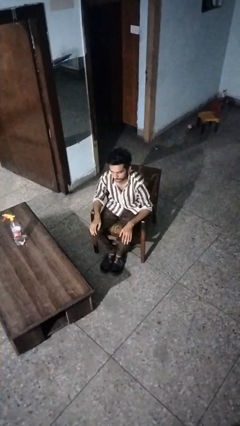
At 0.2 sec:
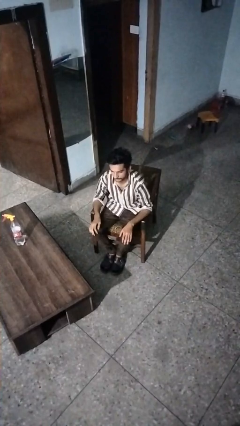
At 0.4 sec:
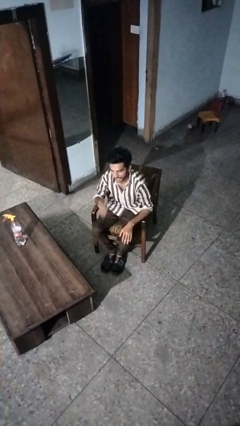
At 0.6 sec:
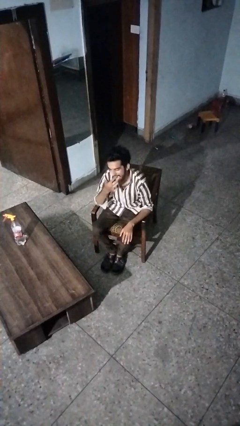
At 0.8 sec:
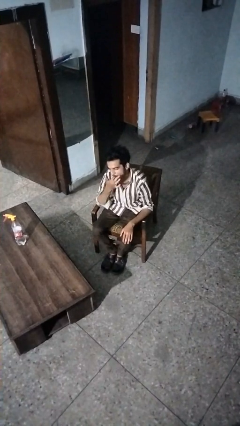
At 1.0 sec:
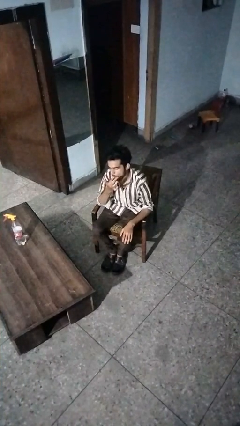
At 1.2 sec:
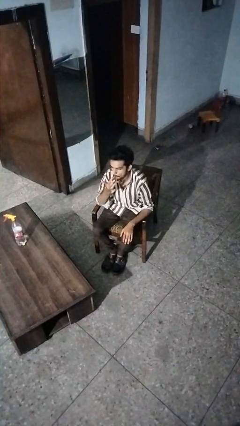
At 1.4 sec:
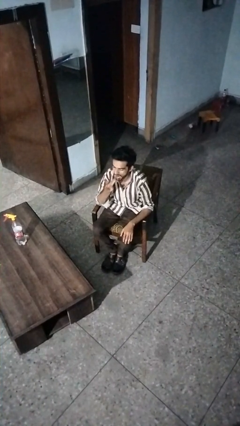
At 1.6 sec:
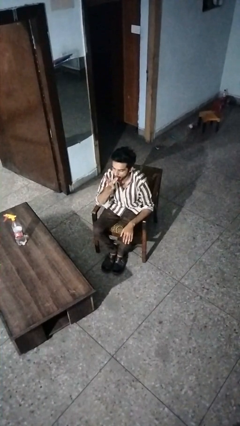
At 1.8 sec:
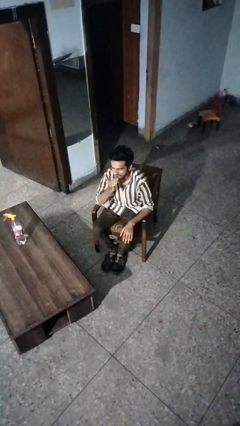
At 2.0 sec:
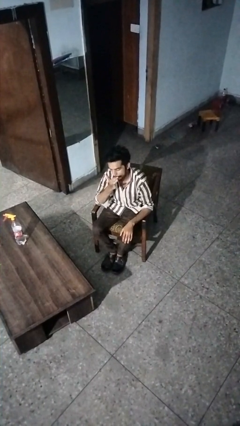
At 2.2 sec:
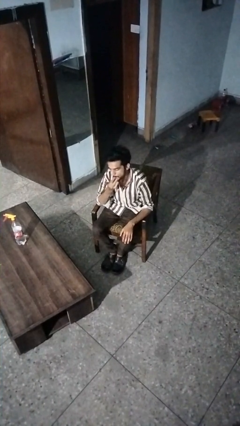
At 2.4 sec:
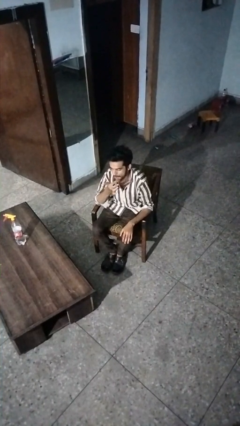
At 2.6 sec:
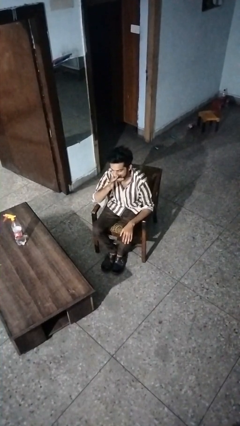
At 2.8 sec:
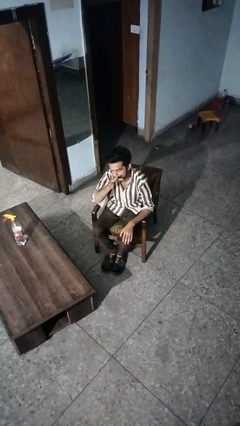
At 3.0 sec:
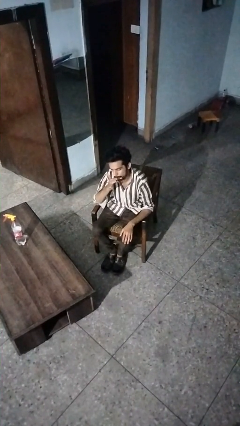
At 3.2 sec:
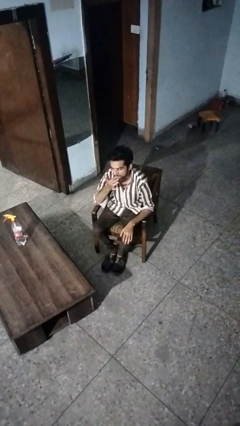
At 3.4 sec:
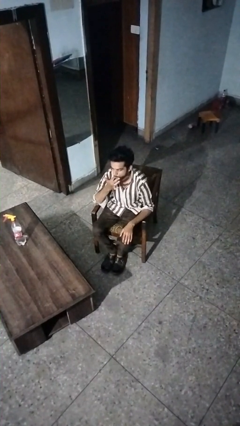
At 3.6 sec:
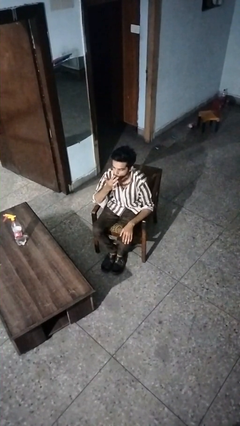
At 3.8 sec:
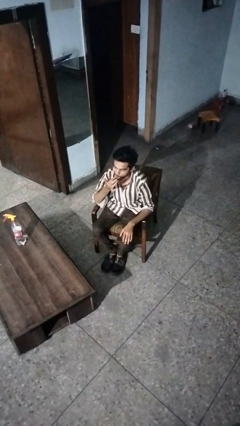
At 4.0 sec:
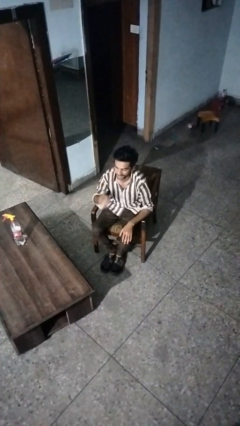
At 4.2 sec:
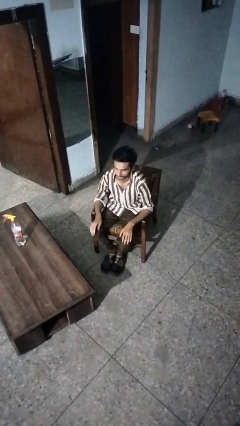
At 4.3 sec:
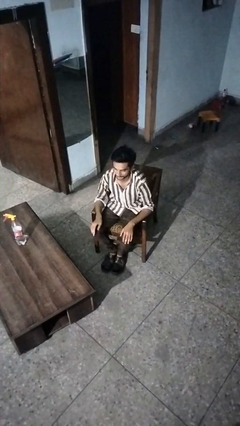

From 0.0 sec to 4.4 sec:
person licks fingers

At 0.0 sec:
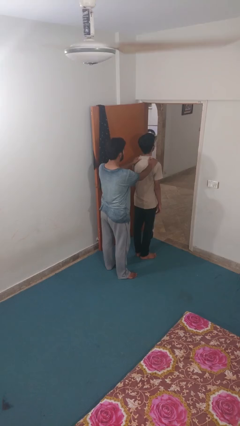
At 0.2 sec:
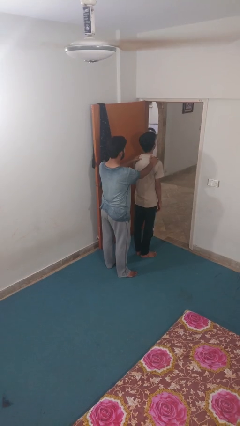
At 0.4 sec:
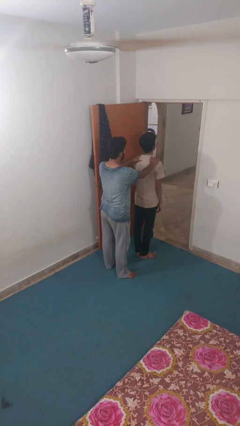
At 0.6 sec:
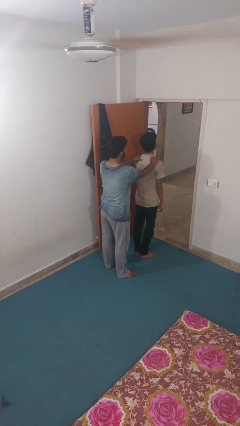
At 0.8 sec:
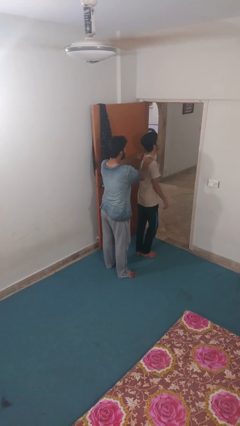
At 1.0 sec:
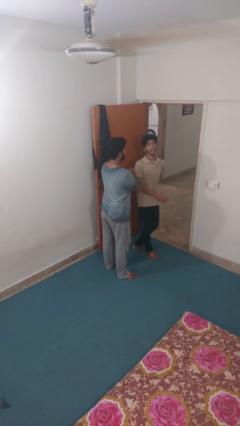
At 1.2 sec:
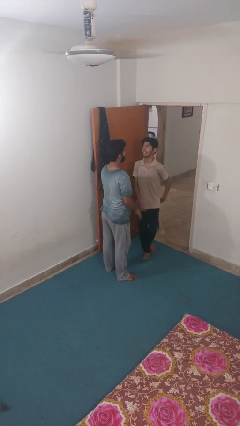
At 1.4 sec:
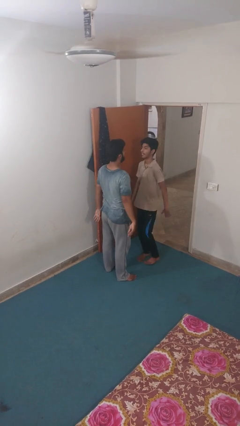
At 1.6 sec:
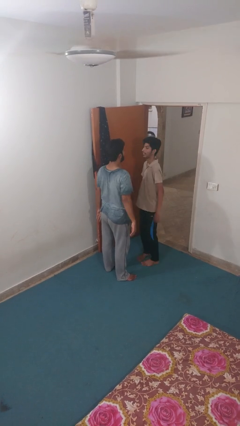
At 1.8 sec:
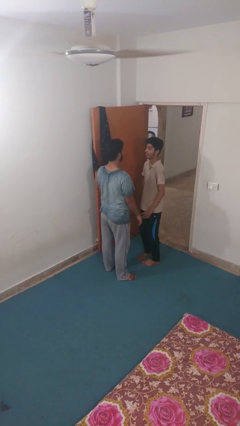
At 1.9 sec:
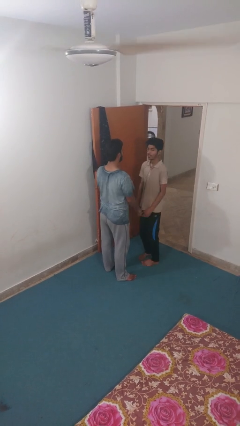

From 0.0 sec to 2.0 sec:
person spins person around

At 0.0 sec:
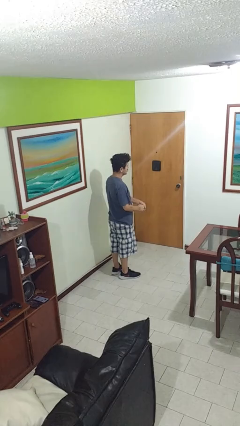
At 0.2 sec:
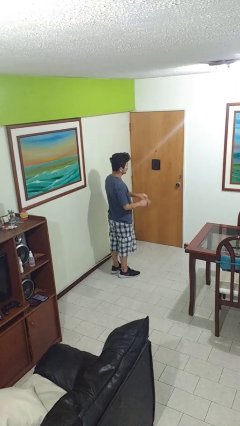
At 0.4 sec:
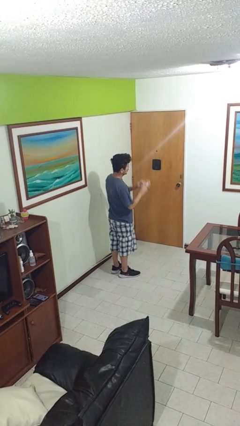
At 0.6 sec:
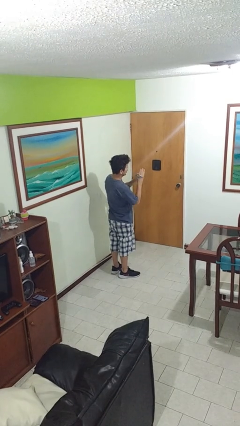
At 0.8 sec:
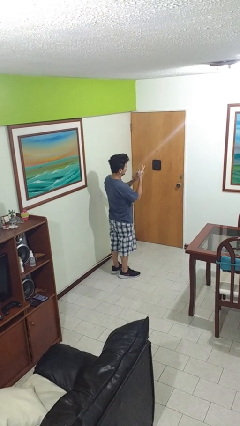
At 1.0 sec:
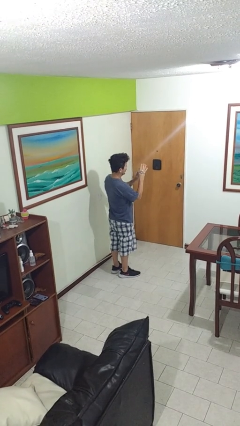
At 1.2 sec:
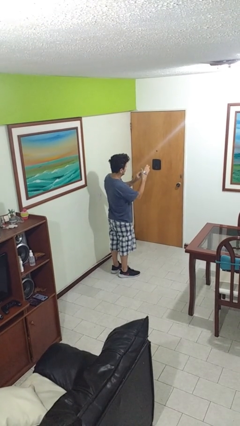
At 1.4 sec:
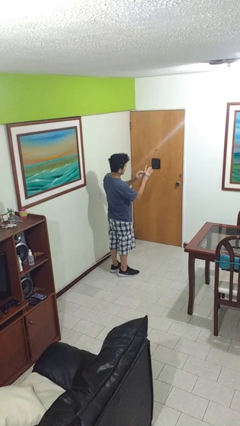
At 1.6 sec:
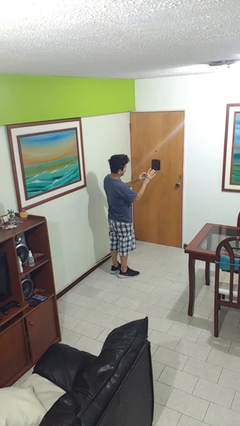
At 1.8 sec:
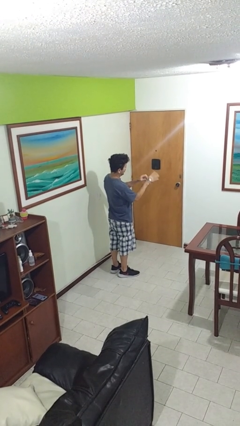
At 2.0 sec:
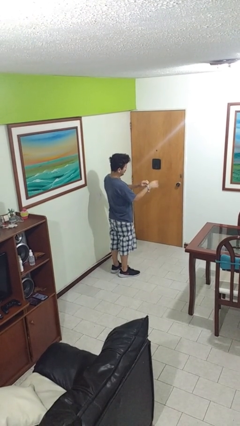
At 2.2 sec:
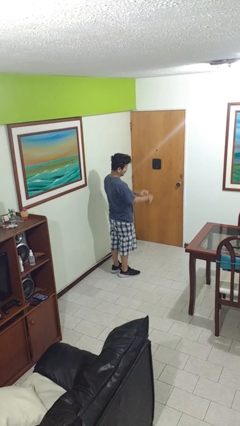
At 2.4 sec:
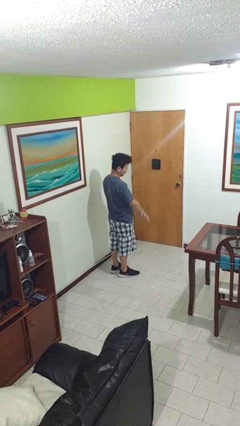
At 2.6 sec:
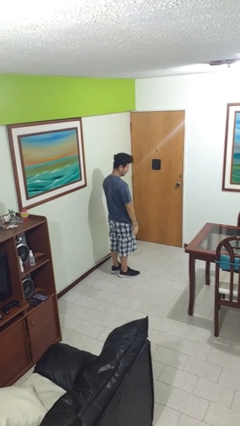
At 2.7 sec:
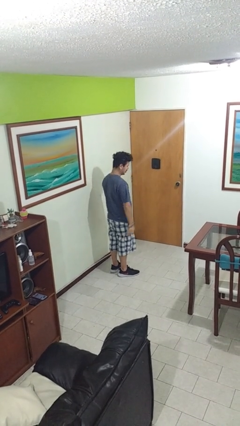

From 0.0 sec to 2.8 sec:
person puts on wristwatch

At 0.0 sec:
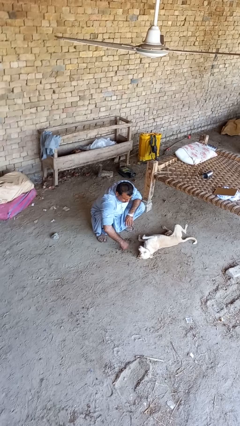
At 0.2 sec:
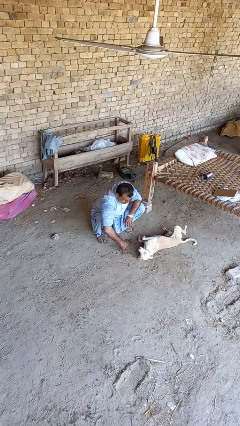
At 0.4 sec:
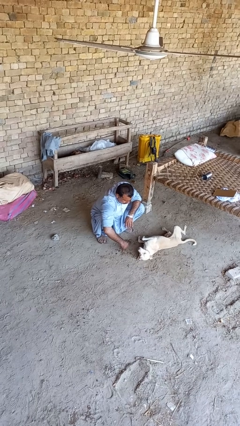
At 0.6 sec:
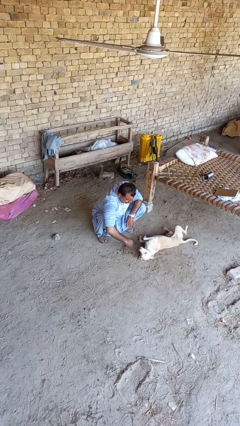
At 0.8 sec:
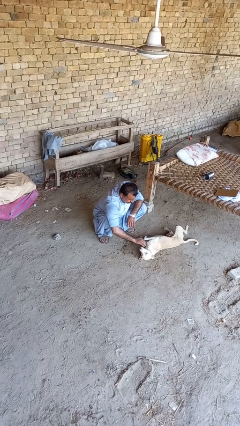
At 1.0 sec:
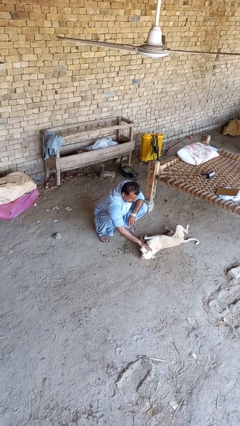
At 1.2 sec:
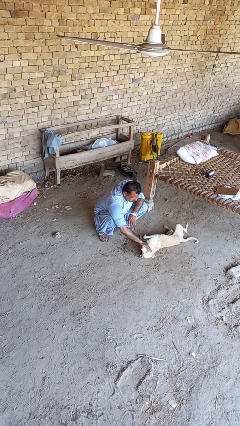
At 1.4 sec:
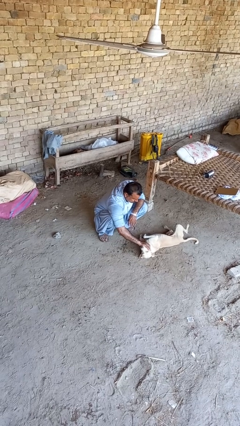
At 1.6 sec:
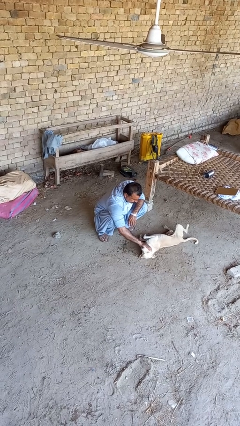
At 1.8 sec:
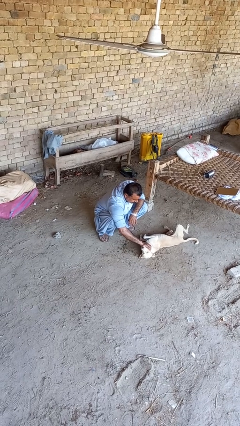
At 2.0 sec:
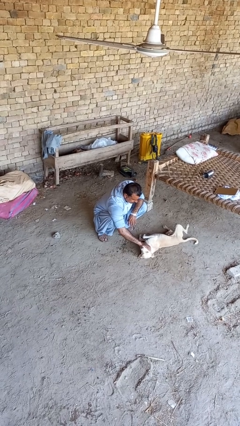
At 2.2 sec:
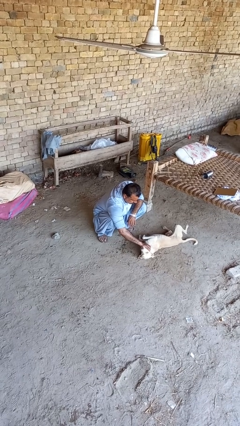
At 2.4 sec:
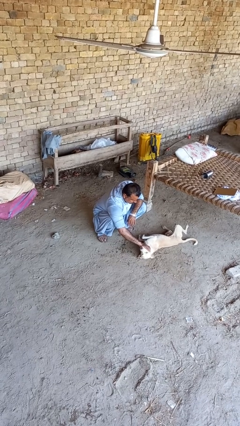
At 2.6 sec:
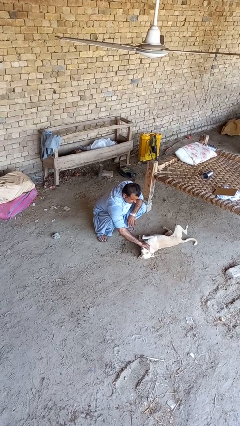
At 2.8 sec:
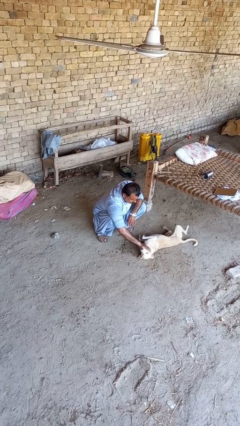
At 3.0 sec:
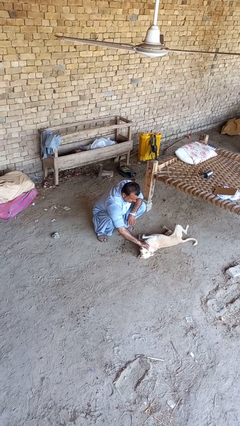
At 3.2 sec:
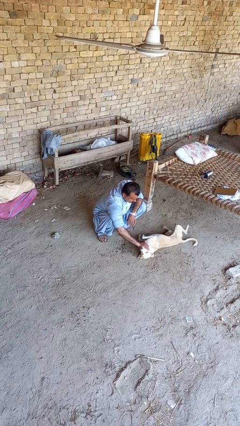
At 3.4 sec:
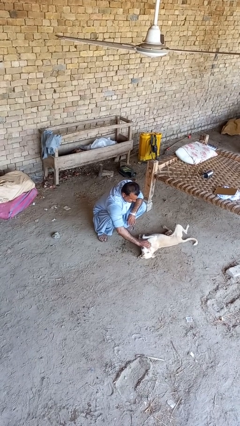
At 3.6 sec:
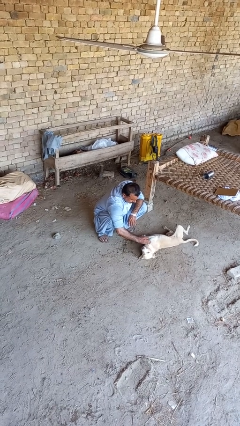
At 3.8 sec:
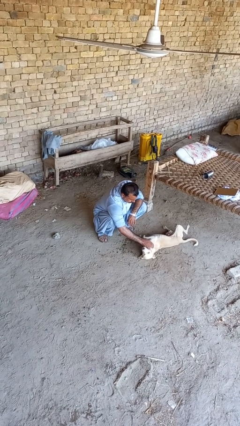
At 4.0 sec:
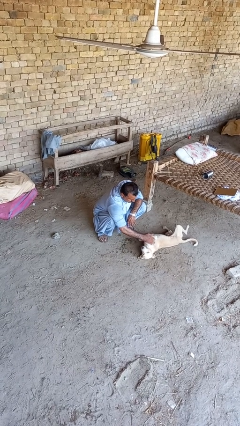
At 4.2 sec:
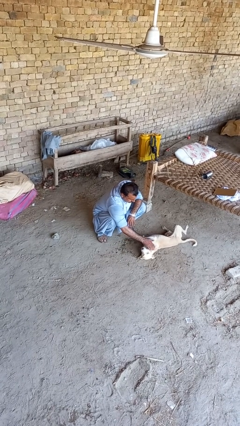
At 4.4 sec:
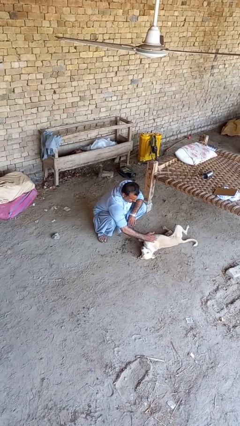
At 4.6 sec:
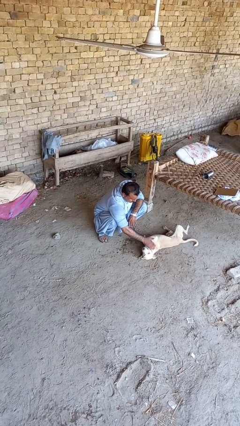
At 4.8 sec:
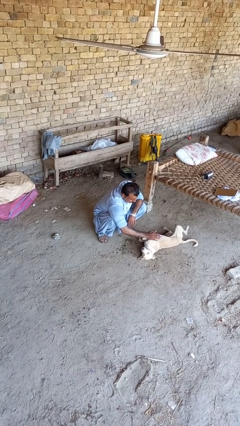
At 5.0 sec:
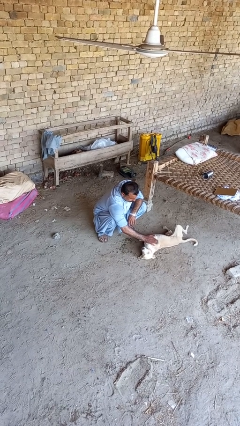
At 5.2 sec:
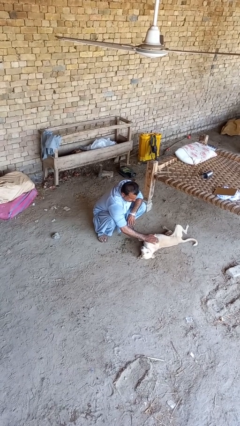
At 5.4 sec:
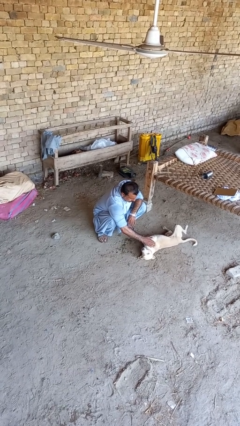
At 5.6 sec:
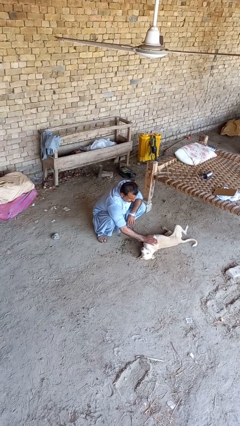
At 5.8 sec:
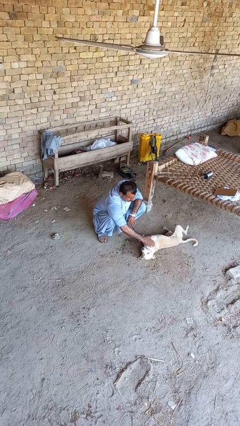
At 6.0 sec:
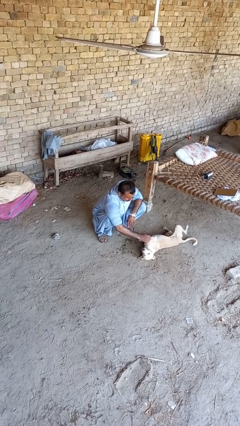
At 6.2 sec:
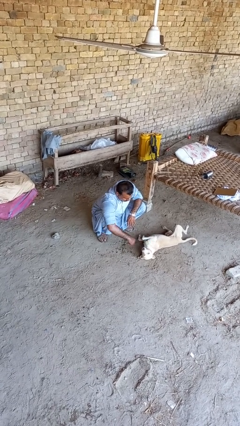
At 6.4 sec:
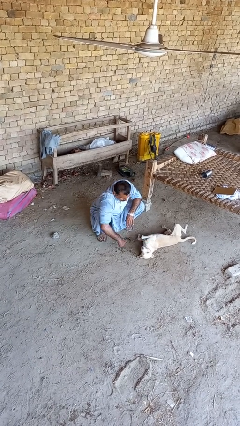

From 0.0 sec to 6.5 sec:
person pets dog

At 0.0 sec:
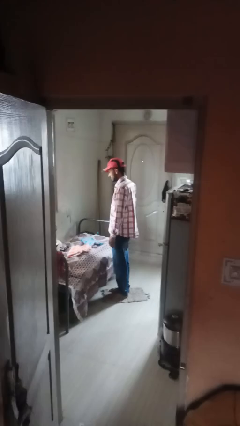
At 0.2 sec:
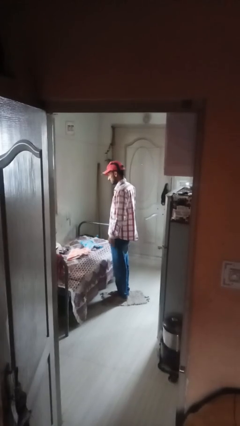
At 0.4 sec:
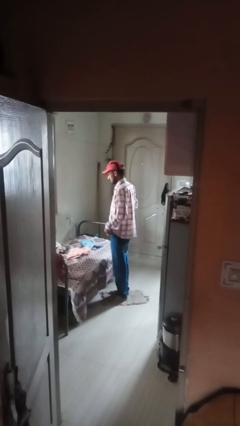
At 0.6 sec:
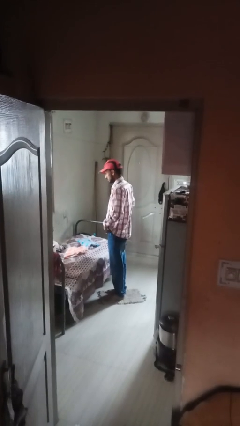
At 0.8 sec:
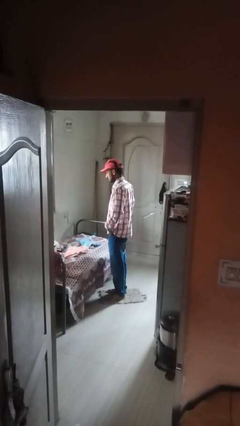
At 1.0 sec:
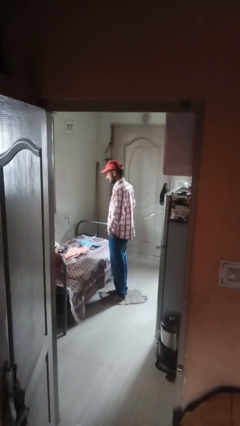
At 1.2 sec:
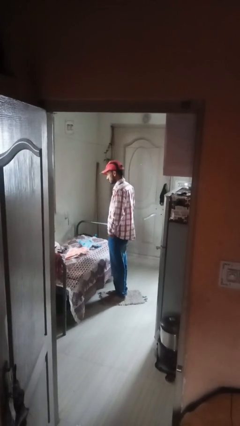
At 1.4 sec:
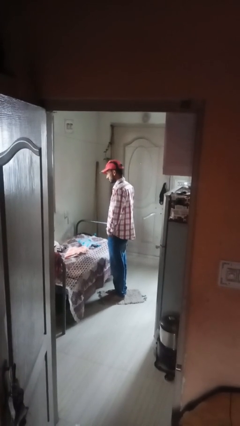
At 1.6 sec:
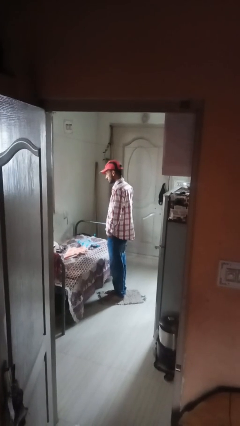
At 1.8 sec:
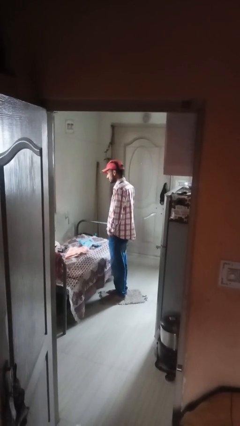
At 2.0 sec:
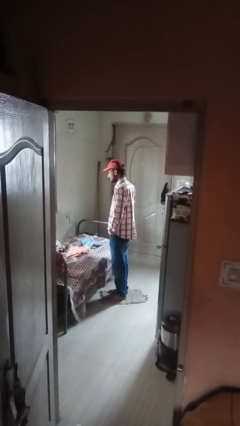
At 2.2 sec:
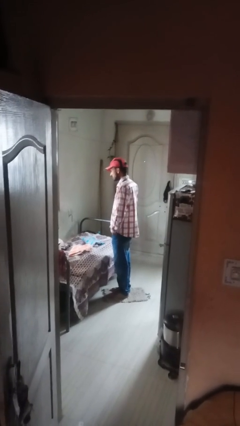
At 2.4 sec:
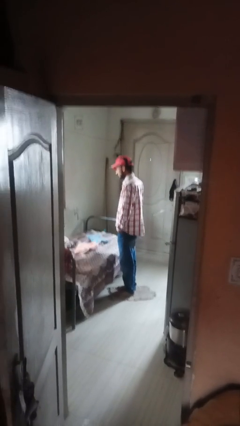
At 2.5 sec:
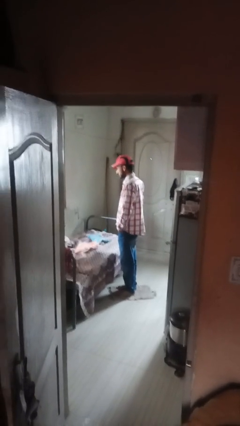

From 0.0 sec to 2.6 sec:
person puts hands in back pockets
